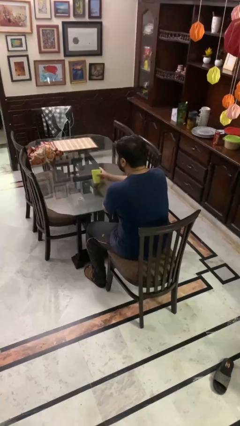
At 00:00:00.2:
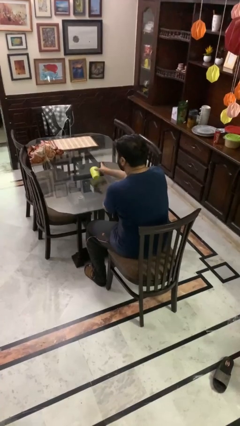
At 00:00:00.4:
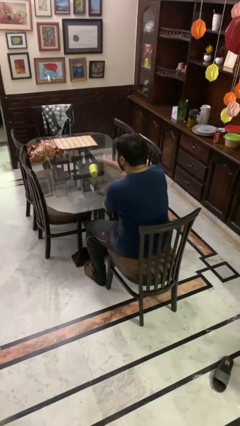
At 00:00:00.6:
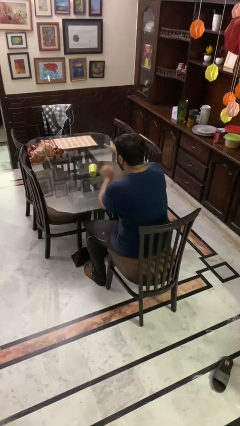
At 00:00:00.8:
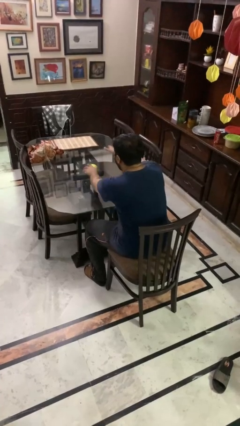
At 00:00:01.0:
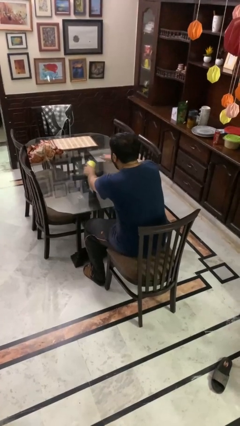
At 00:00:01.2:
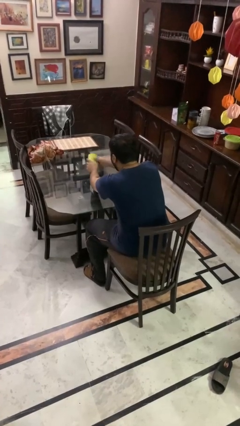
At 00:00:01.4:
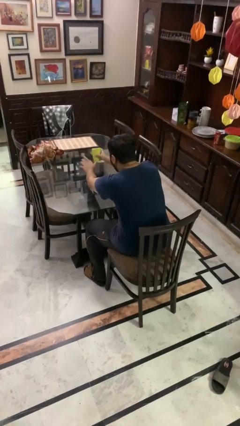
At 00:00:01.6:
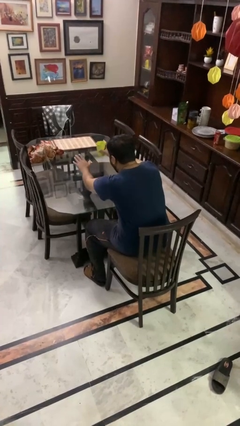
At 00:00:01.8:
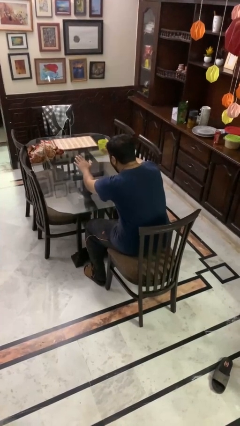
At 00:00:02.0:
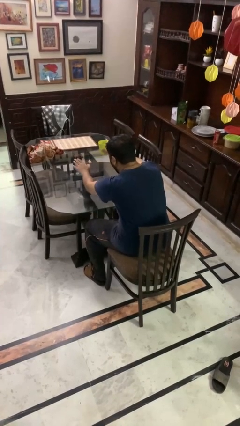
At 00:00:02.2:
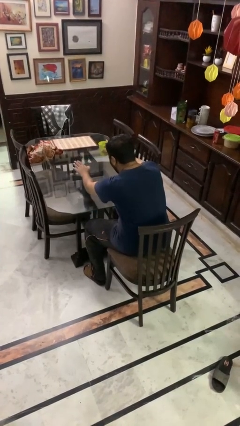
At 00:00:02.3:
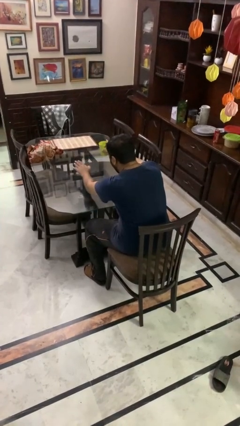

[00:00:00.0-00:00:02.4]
person spills on table

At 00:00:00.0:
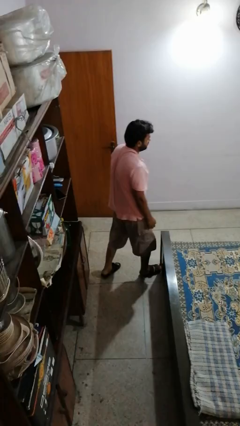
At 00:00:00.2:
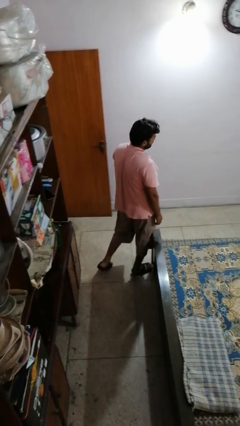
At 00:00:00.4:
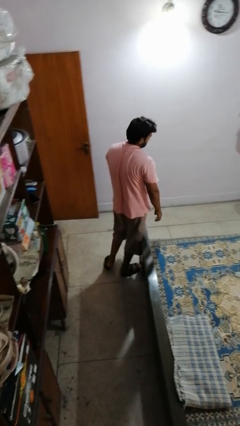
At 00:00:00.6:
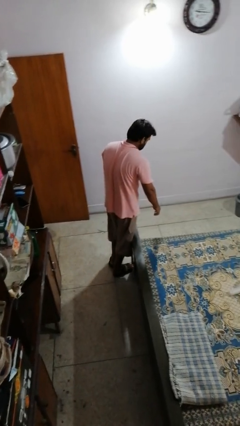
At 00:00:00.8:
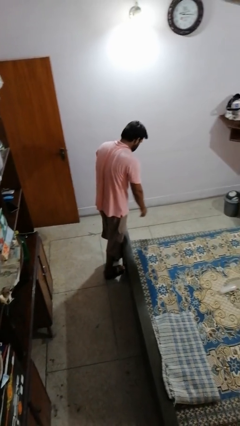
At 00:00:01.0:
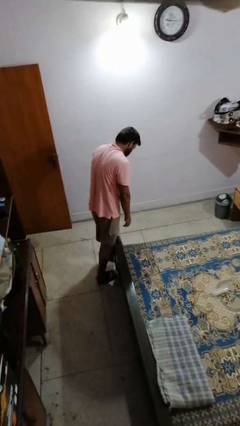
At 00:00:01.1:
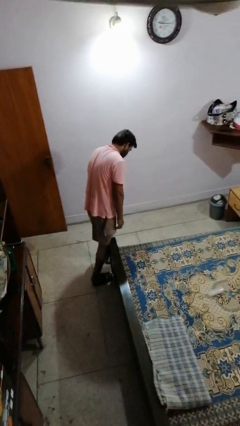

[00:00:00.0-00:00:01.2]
person trips on object on floor

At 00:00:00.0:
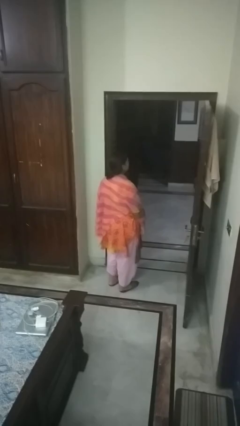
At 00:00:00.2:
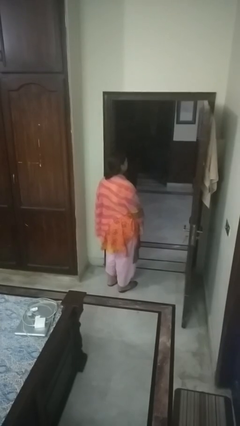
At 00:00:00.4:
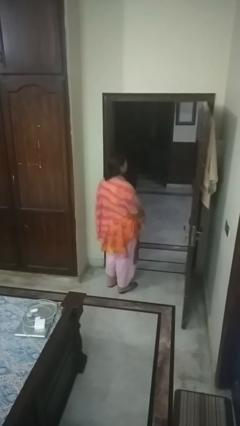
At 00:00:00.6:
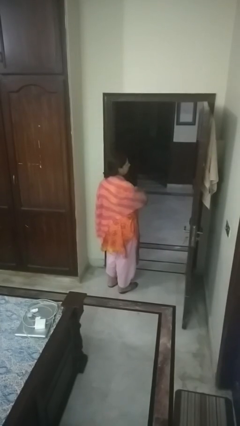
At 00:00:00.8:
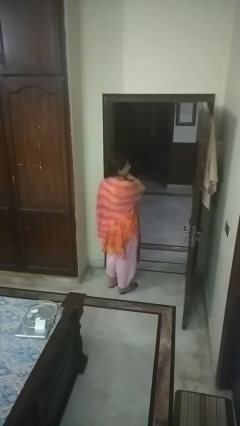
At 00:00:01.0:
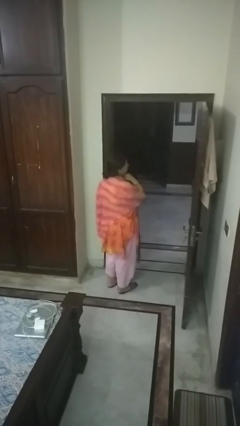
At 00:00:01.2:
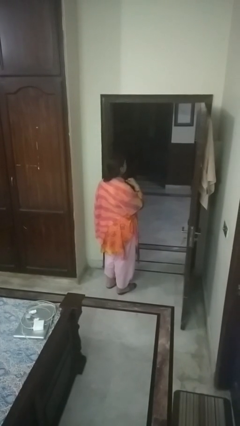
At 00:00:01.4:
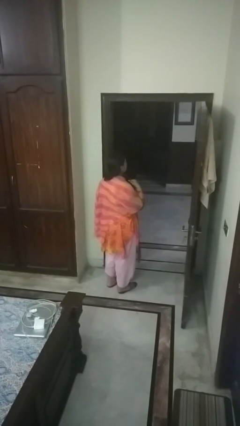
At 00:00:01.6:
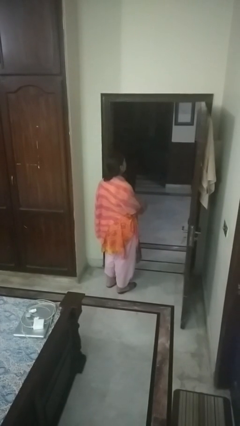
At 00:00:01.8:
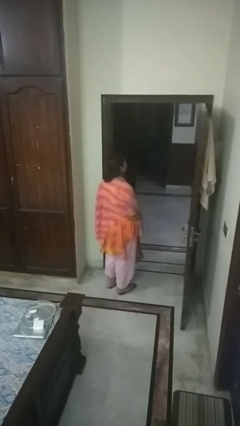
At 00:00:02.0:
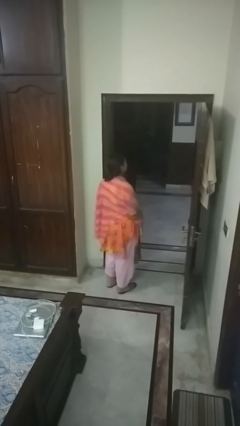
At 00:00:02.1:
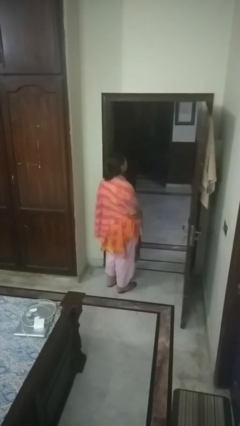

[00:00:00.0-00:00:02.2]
person gestures cut

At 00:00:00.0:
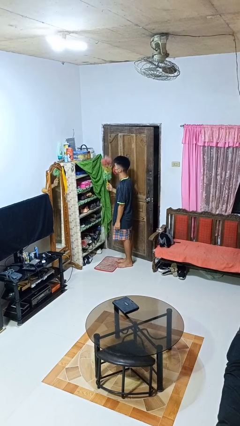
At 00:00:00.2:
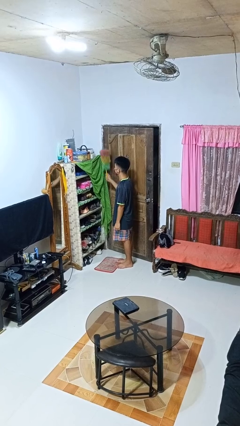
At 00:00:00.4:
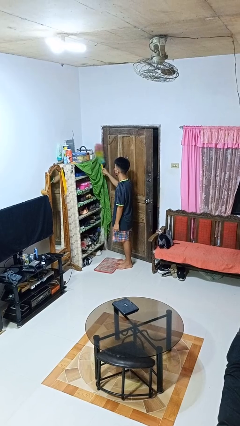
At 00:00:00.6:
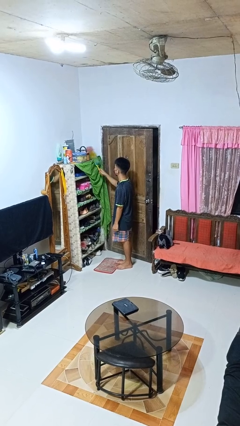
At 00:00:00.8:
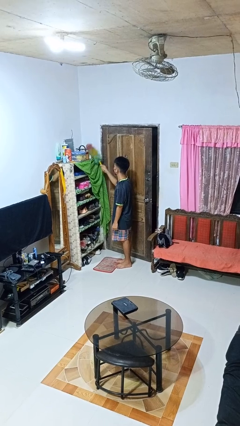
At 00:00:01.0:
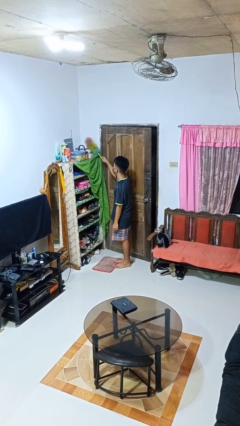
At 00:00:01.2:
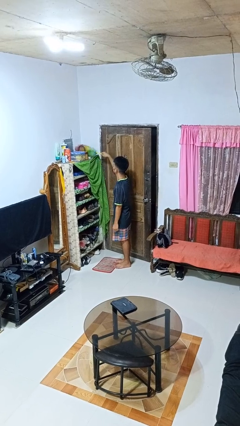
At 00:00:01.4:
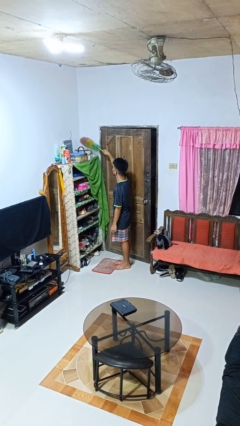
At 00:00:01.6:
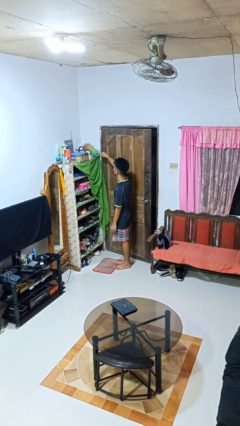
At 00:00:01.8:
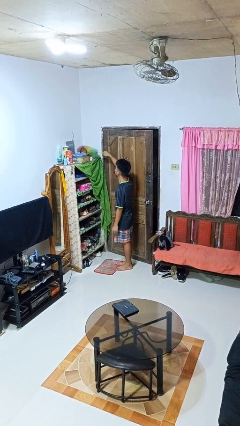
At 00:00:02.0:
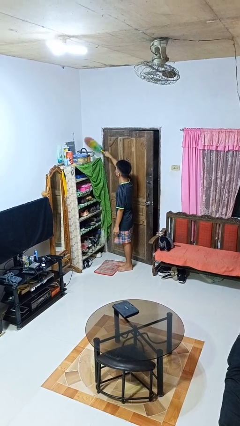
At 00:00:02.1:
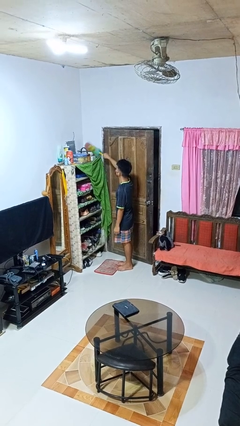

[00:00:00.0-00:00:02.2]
person dusts furniture

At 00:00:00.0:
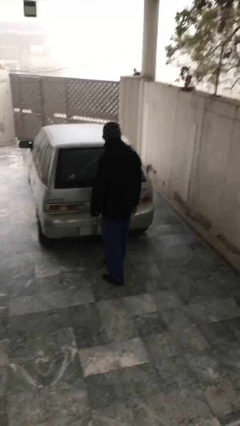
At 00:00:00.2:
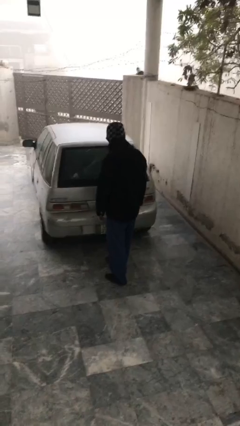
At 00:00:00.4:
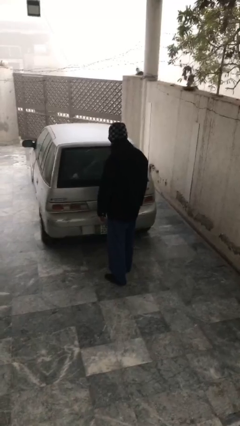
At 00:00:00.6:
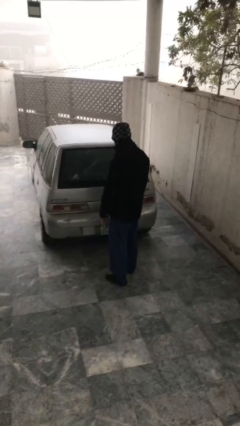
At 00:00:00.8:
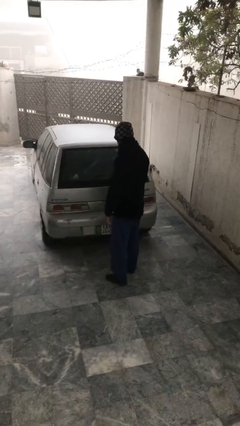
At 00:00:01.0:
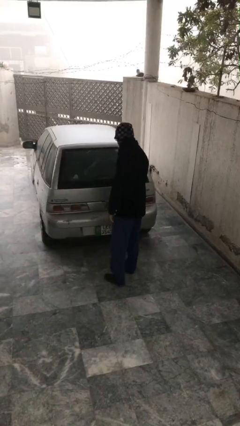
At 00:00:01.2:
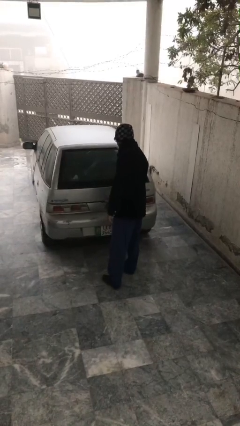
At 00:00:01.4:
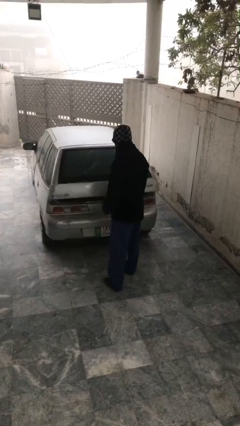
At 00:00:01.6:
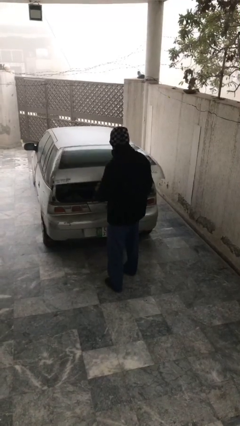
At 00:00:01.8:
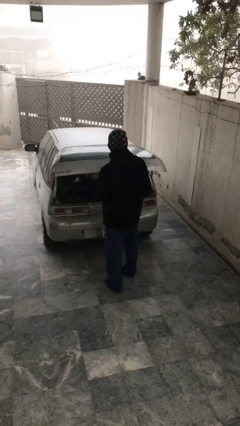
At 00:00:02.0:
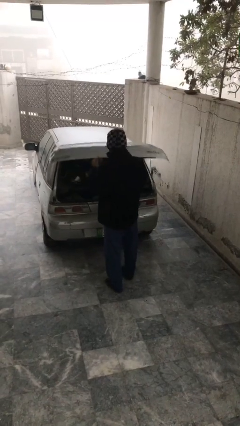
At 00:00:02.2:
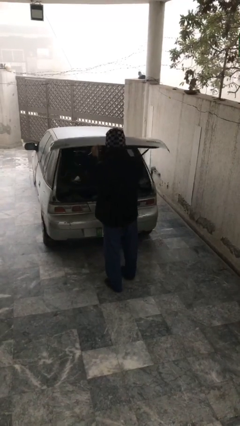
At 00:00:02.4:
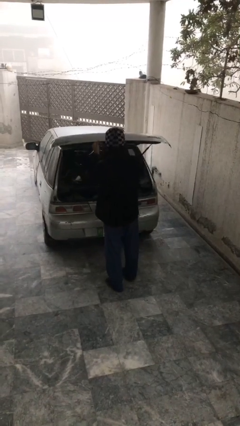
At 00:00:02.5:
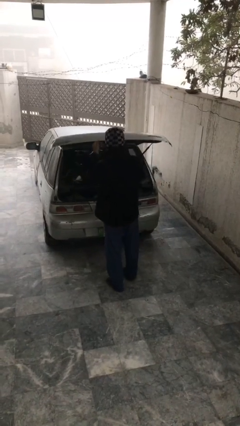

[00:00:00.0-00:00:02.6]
person opens car trunk

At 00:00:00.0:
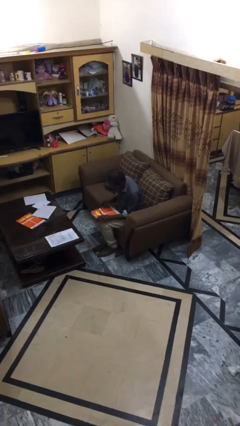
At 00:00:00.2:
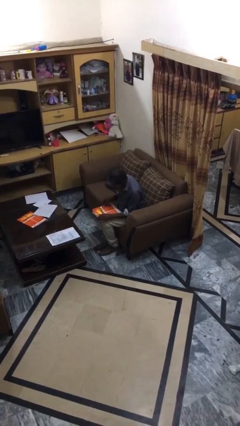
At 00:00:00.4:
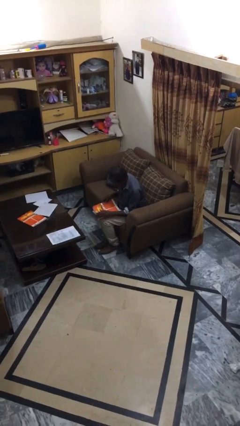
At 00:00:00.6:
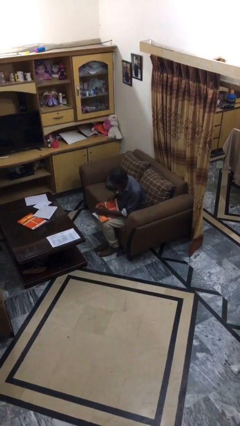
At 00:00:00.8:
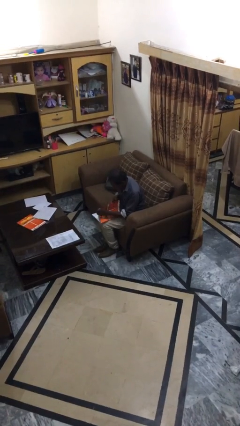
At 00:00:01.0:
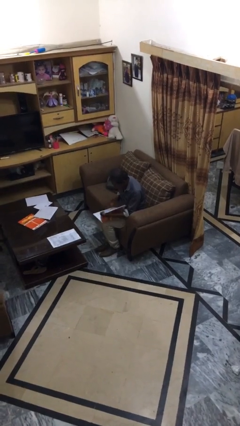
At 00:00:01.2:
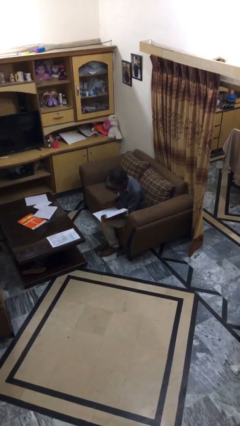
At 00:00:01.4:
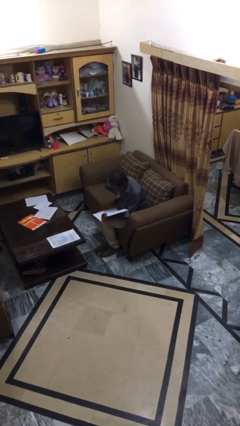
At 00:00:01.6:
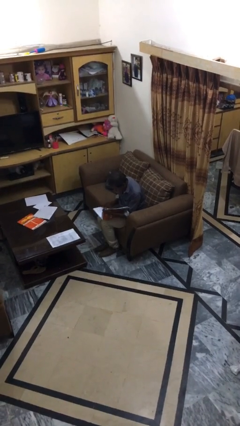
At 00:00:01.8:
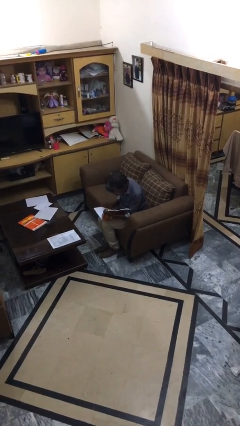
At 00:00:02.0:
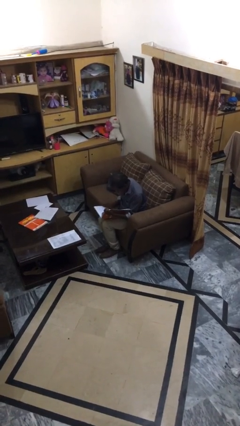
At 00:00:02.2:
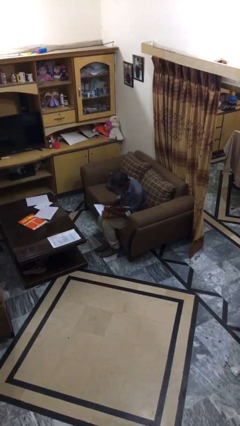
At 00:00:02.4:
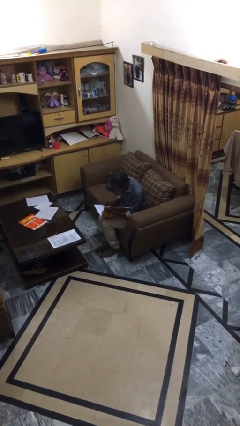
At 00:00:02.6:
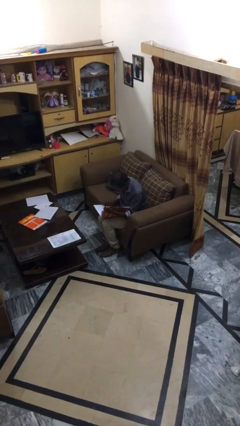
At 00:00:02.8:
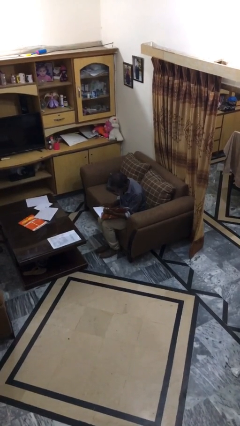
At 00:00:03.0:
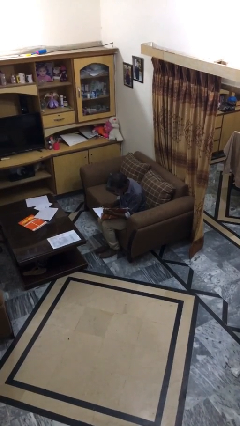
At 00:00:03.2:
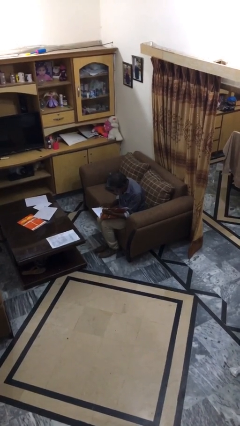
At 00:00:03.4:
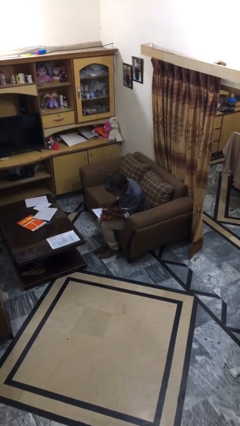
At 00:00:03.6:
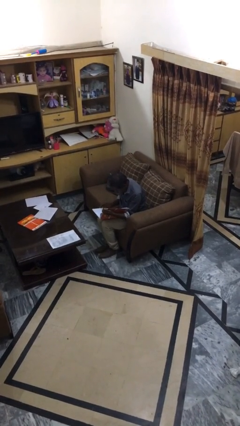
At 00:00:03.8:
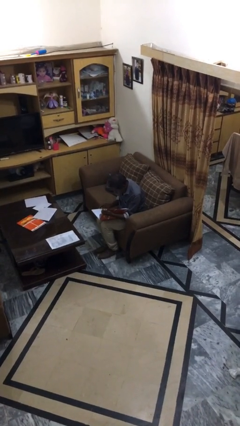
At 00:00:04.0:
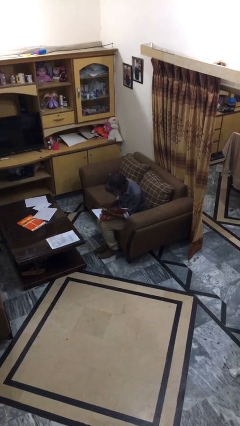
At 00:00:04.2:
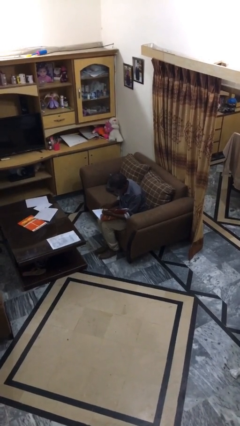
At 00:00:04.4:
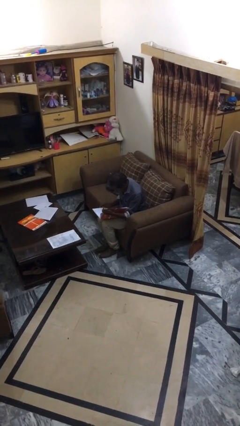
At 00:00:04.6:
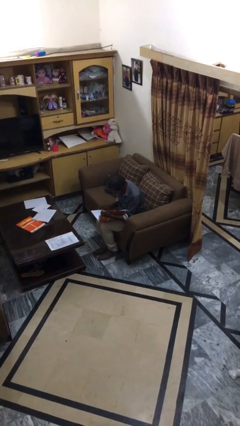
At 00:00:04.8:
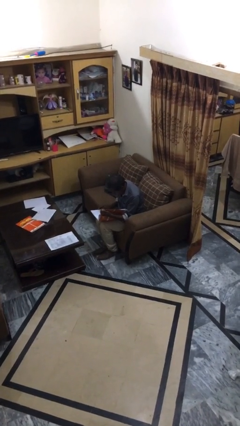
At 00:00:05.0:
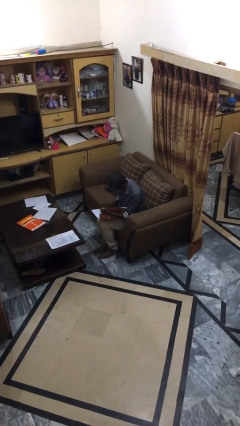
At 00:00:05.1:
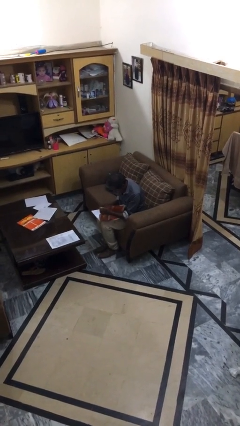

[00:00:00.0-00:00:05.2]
person reads document

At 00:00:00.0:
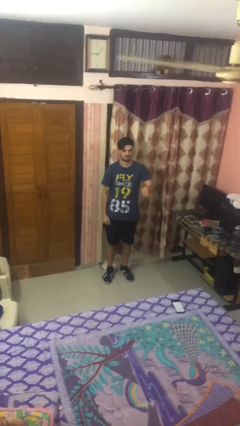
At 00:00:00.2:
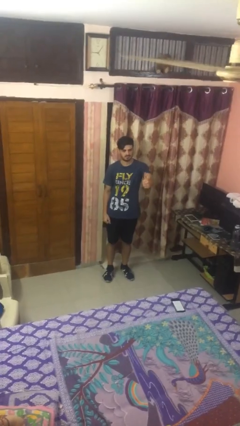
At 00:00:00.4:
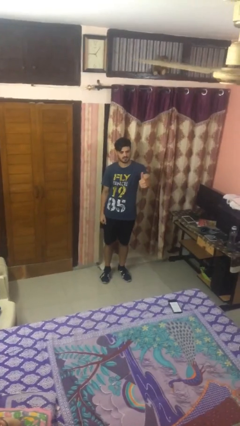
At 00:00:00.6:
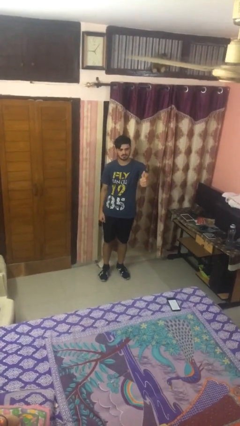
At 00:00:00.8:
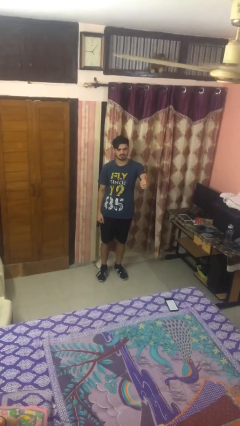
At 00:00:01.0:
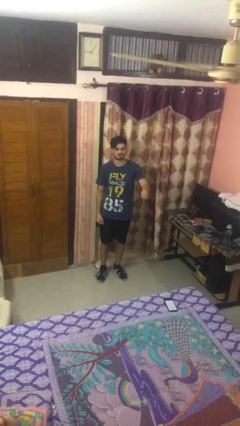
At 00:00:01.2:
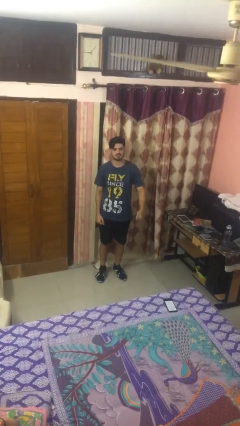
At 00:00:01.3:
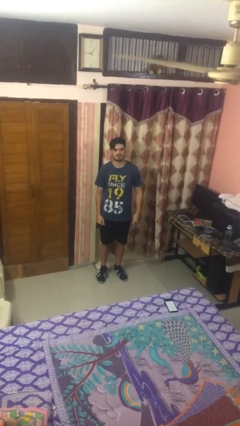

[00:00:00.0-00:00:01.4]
person gestures thumbs up
